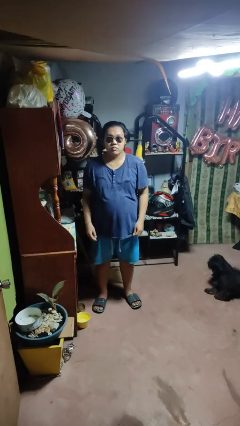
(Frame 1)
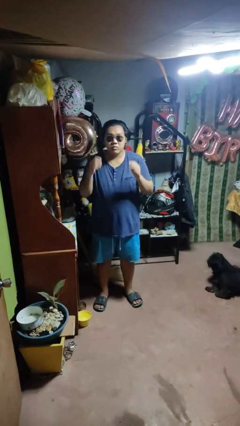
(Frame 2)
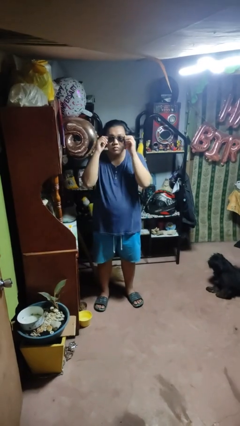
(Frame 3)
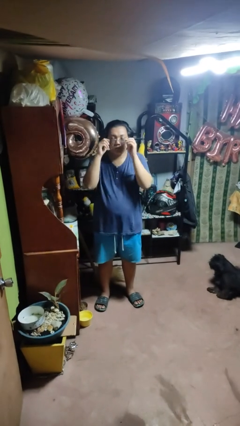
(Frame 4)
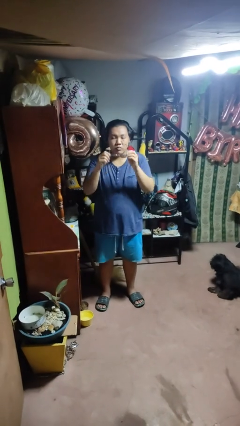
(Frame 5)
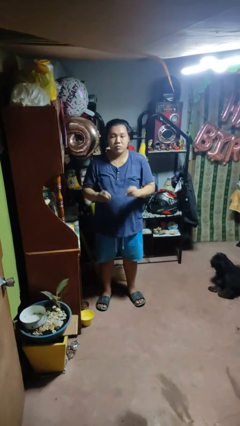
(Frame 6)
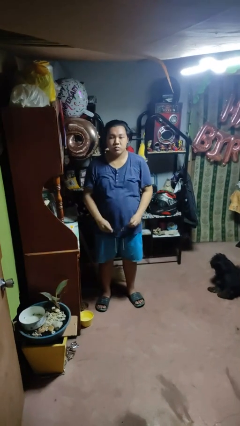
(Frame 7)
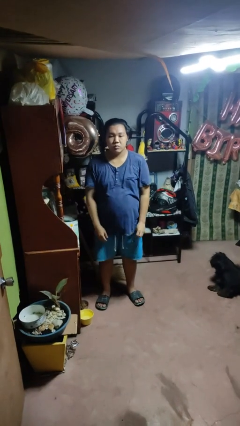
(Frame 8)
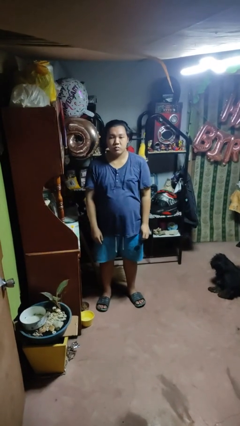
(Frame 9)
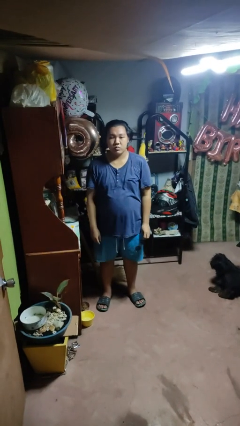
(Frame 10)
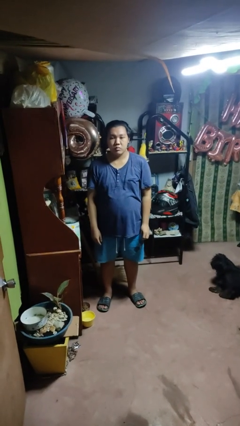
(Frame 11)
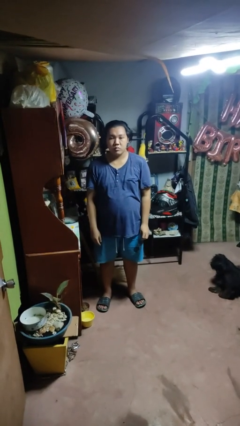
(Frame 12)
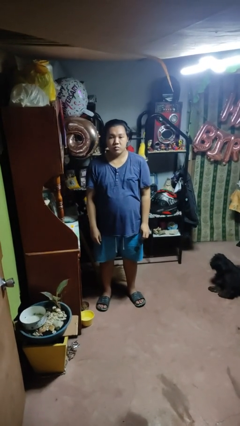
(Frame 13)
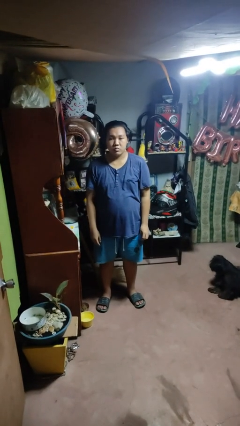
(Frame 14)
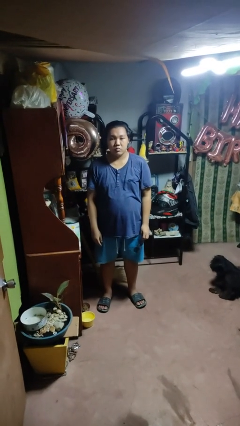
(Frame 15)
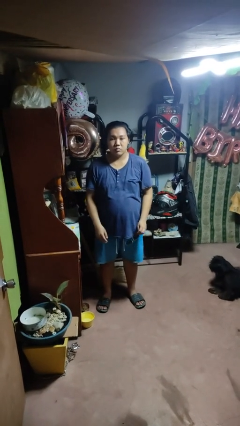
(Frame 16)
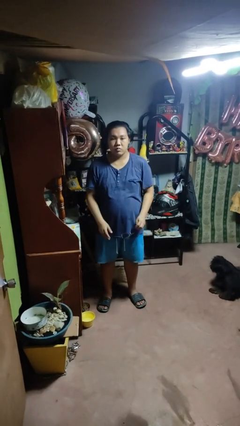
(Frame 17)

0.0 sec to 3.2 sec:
person takes off sunglasses

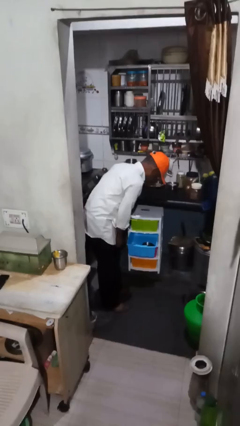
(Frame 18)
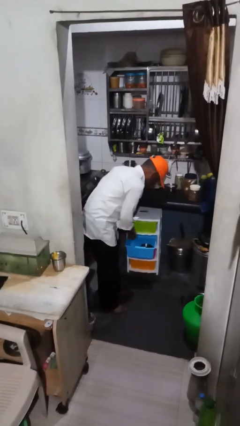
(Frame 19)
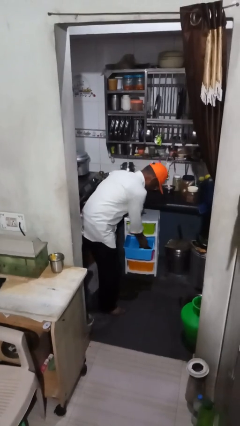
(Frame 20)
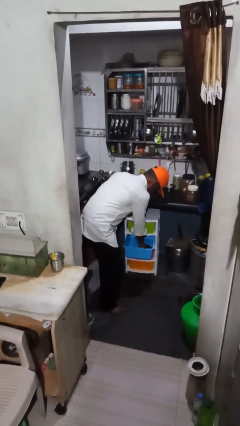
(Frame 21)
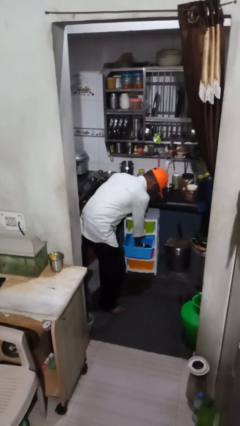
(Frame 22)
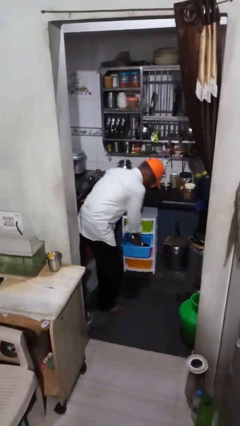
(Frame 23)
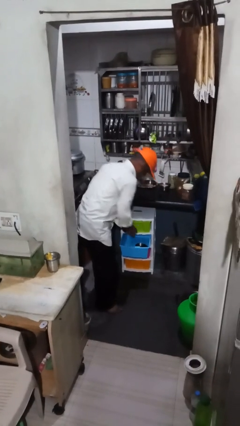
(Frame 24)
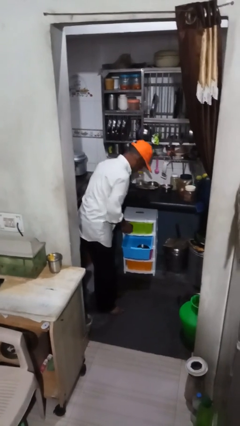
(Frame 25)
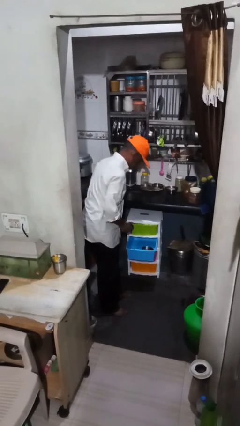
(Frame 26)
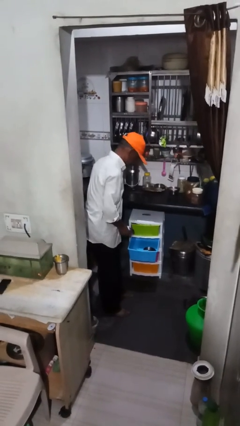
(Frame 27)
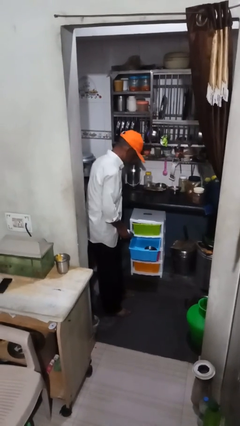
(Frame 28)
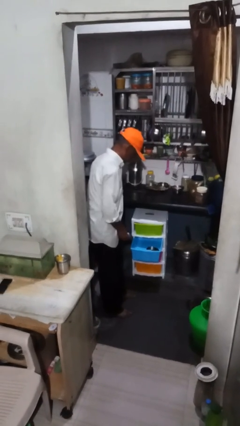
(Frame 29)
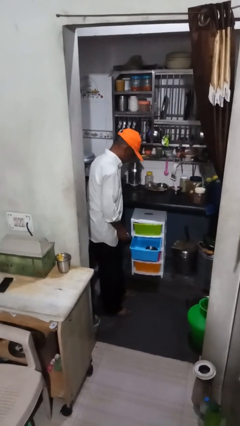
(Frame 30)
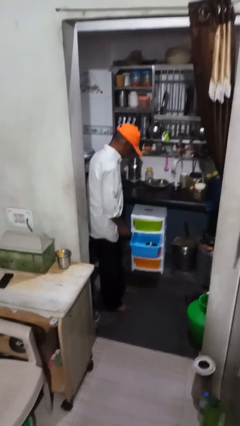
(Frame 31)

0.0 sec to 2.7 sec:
person takes object from cabinet

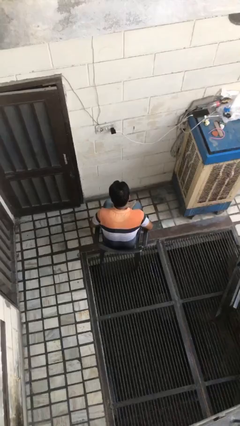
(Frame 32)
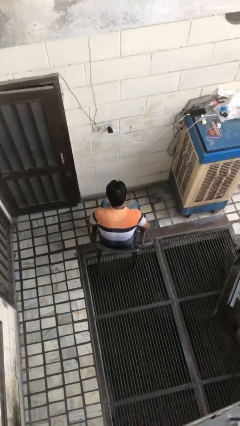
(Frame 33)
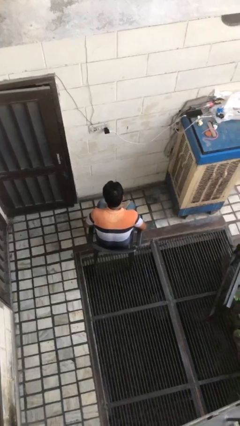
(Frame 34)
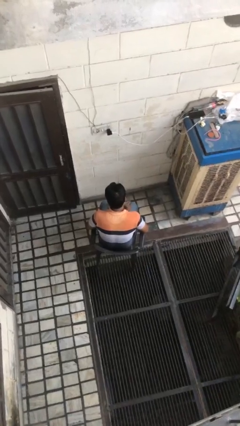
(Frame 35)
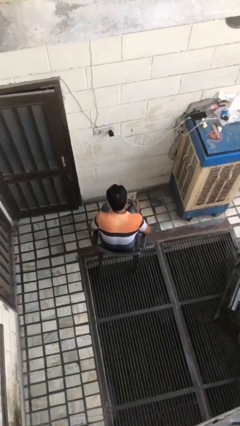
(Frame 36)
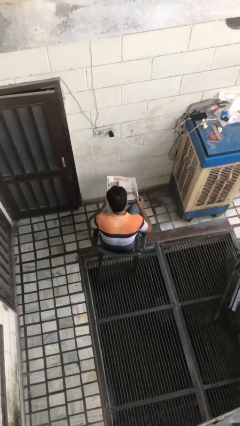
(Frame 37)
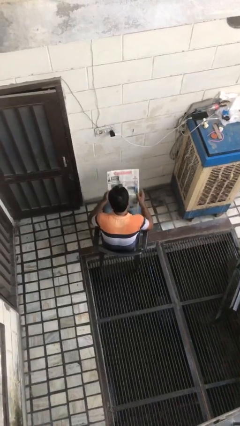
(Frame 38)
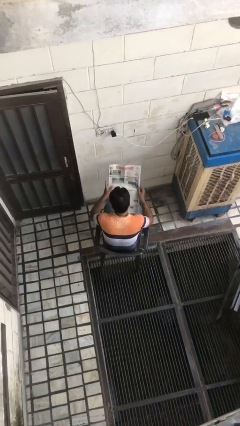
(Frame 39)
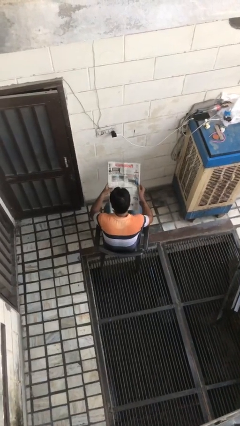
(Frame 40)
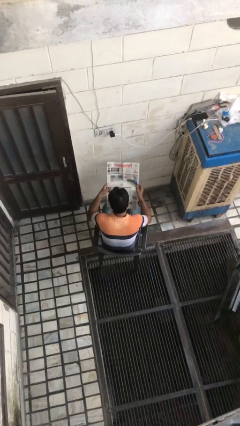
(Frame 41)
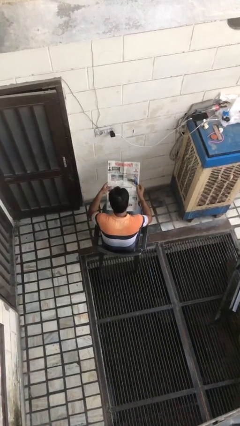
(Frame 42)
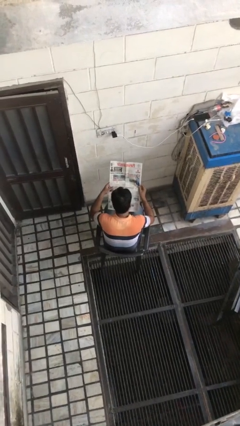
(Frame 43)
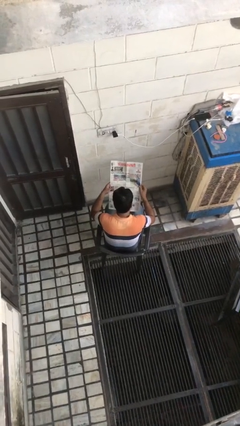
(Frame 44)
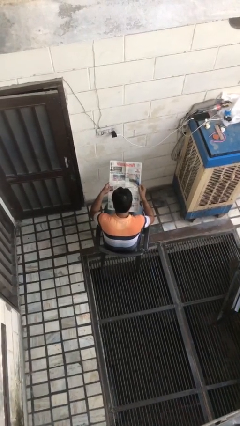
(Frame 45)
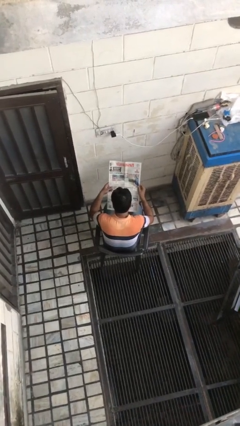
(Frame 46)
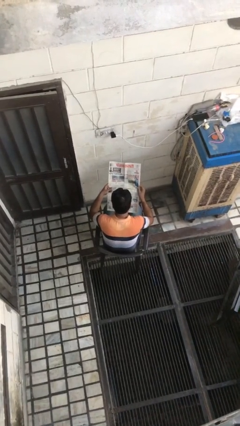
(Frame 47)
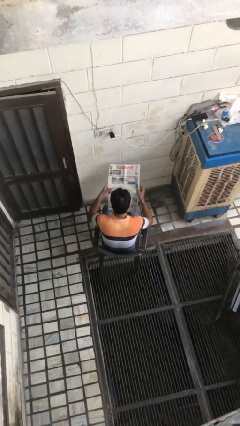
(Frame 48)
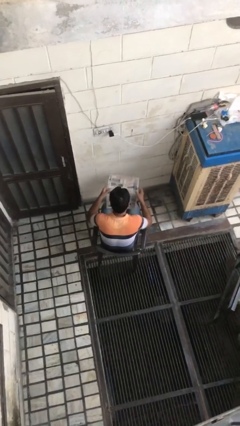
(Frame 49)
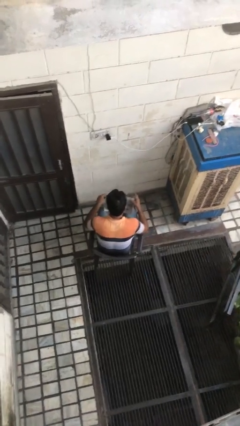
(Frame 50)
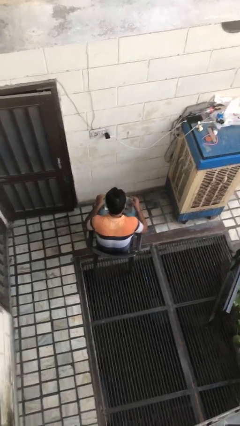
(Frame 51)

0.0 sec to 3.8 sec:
person reads newspaper

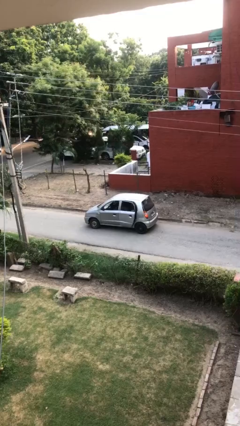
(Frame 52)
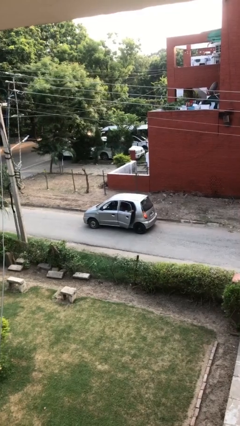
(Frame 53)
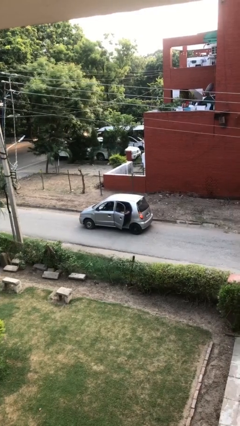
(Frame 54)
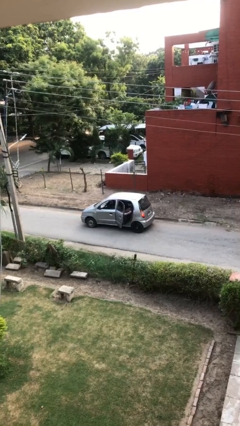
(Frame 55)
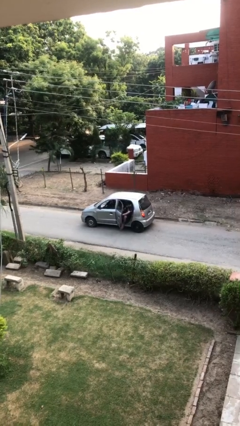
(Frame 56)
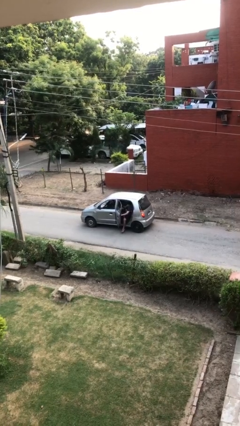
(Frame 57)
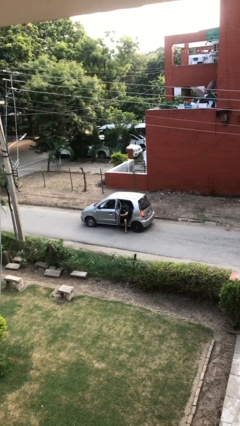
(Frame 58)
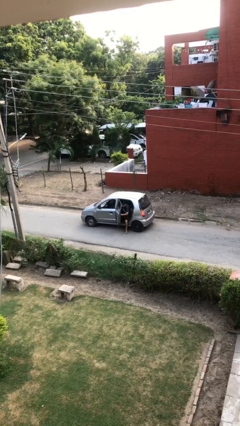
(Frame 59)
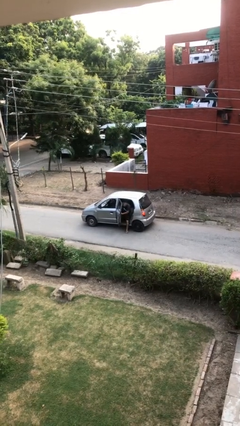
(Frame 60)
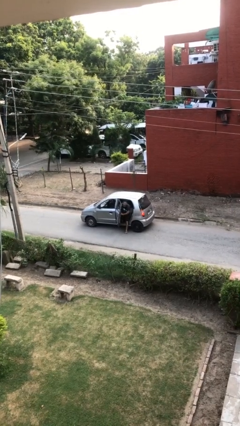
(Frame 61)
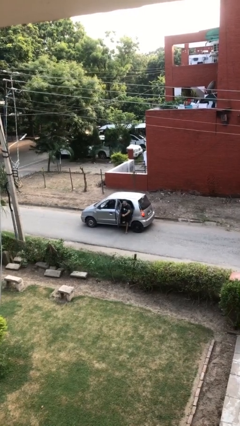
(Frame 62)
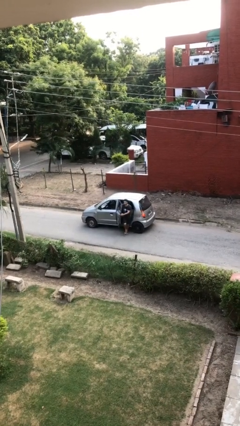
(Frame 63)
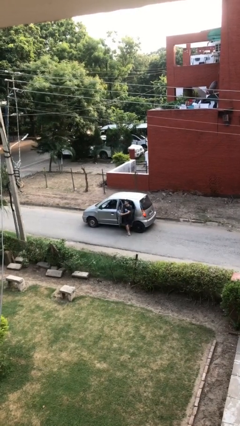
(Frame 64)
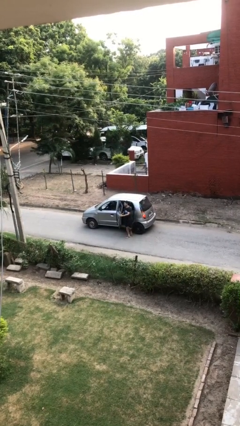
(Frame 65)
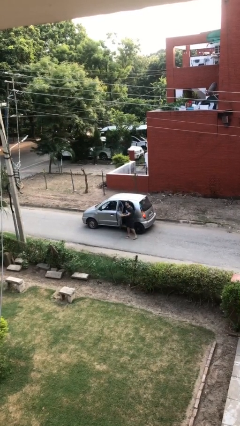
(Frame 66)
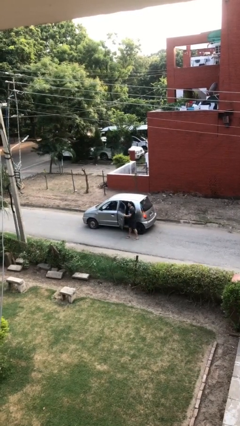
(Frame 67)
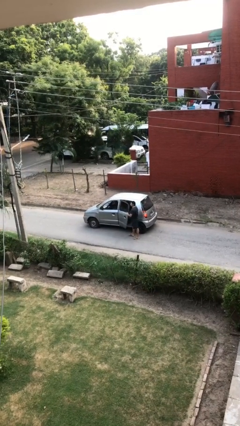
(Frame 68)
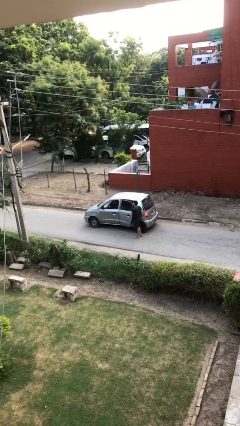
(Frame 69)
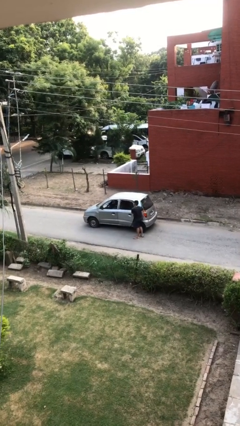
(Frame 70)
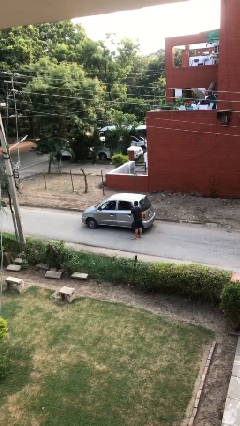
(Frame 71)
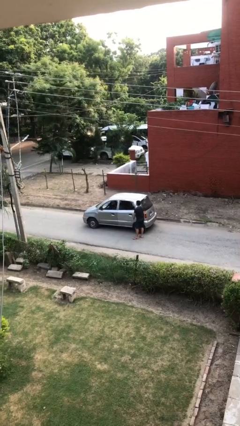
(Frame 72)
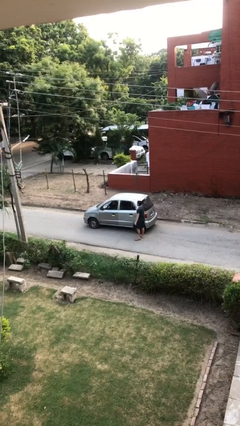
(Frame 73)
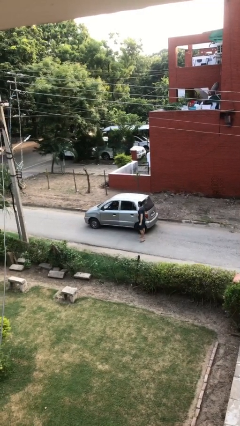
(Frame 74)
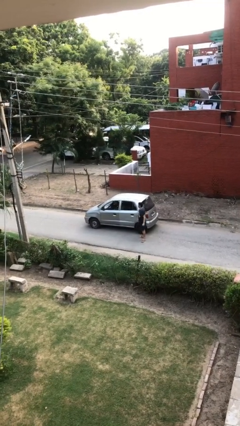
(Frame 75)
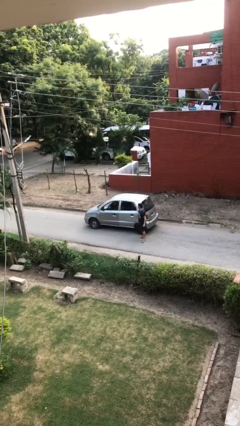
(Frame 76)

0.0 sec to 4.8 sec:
car drops off person

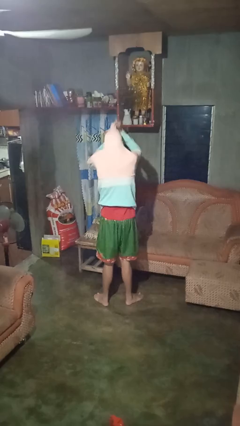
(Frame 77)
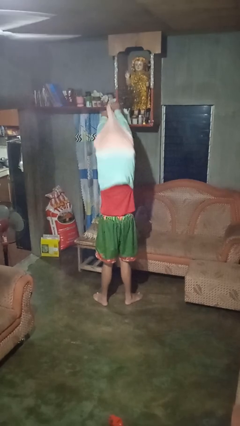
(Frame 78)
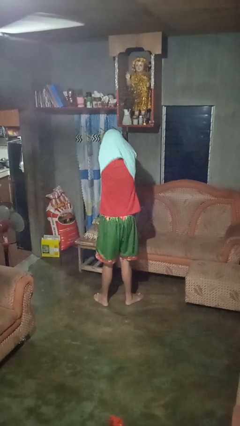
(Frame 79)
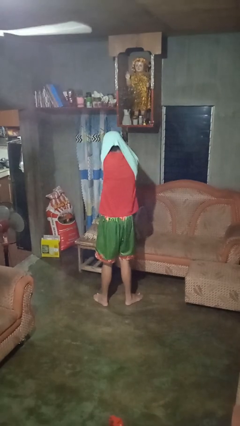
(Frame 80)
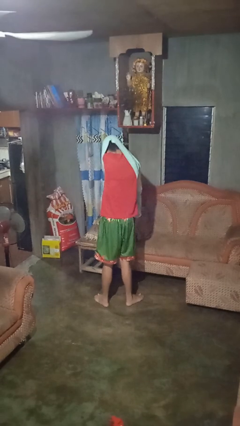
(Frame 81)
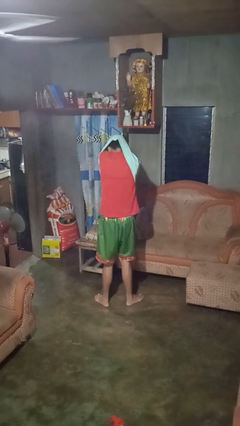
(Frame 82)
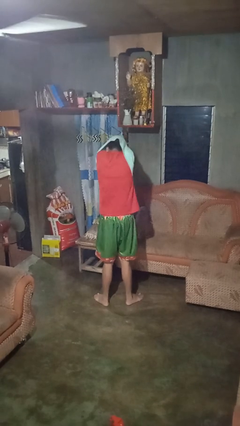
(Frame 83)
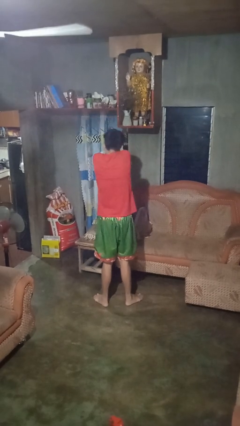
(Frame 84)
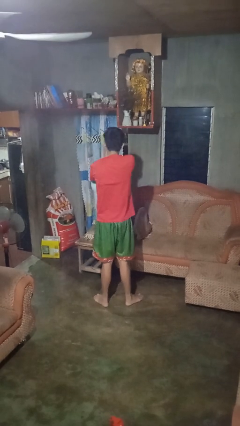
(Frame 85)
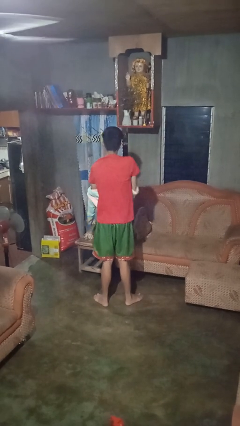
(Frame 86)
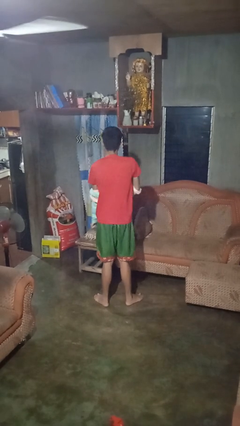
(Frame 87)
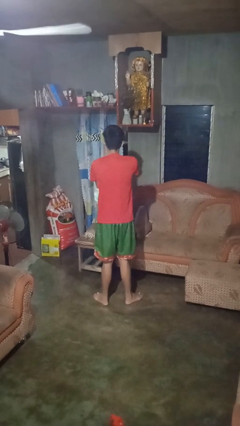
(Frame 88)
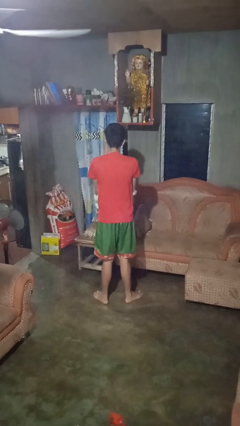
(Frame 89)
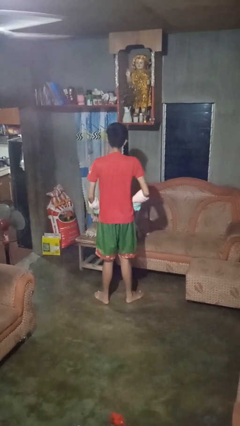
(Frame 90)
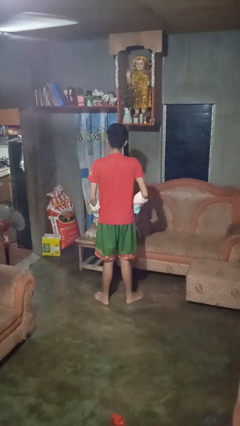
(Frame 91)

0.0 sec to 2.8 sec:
person takes off hoodie

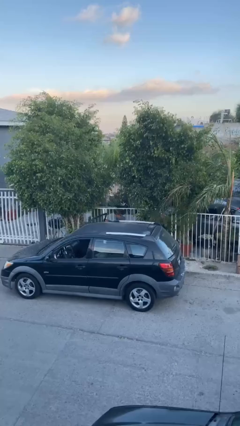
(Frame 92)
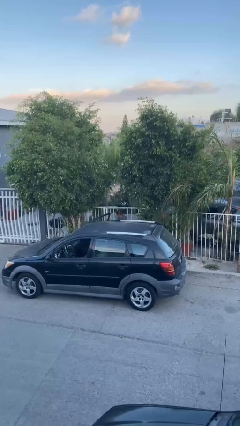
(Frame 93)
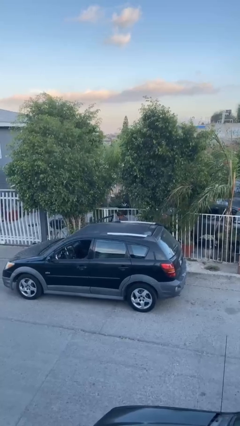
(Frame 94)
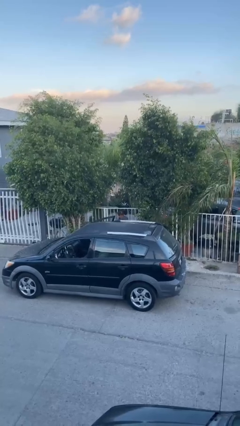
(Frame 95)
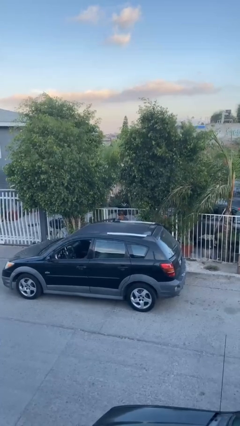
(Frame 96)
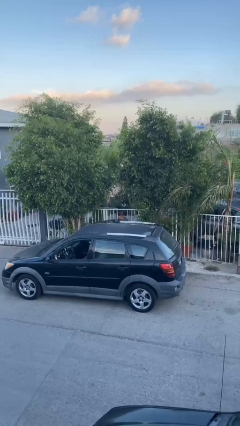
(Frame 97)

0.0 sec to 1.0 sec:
person closes car door
